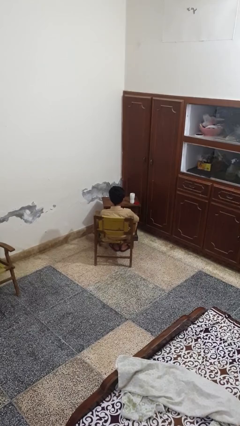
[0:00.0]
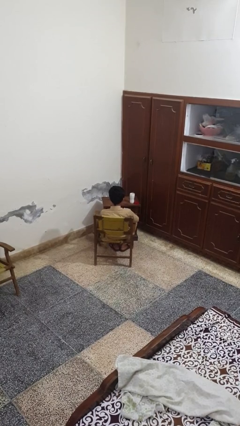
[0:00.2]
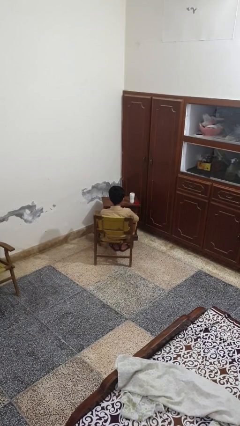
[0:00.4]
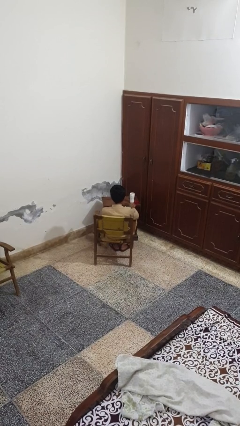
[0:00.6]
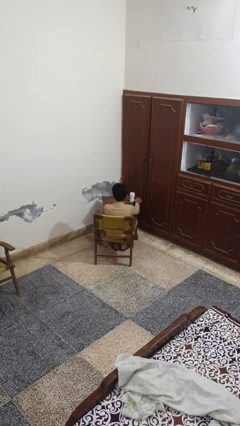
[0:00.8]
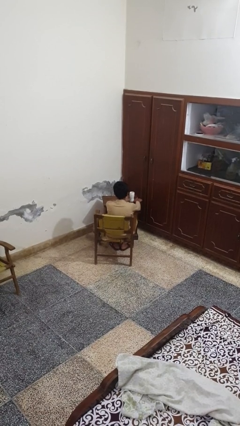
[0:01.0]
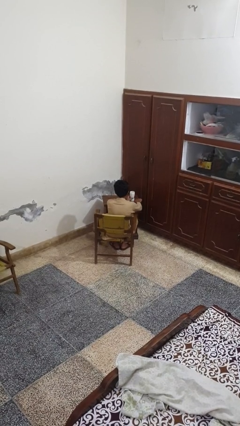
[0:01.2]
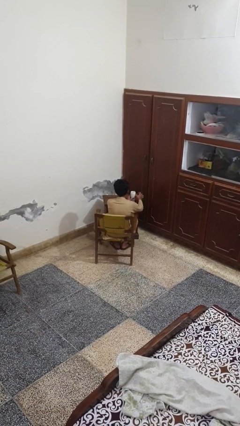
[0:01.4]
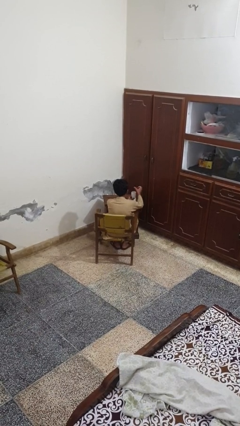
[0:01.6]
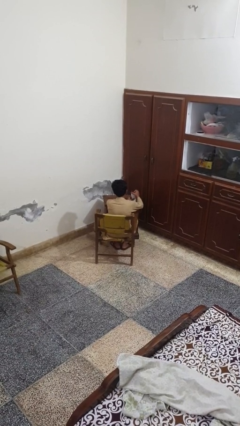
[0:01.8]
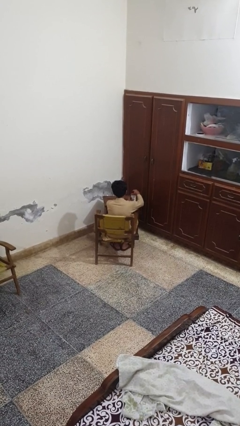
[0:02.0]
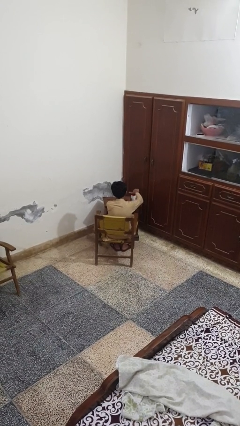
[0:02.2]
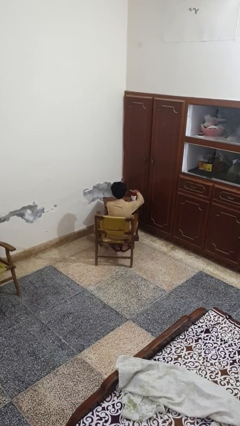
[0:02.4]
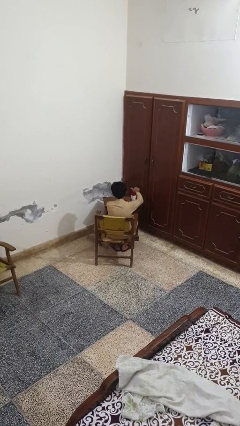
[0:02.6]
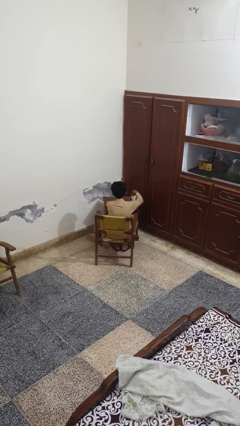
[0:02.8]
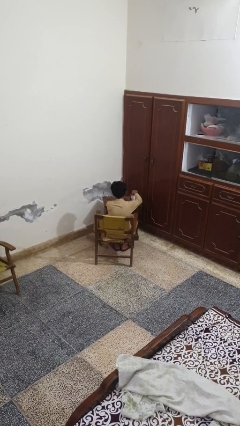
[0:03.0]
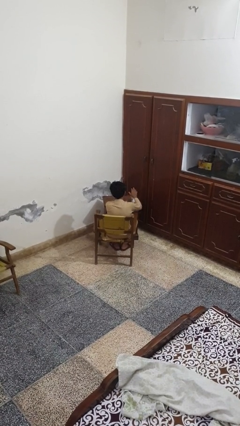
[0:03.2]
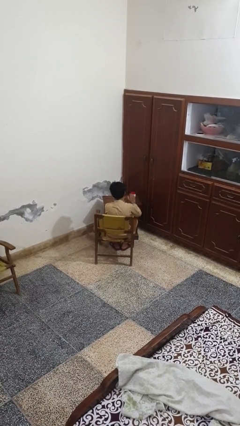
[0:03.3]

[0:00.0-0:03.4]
person closes jar

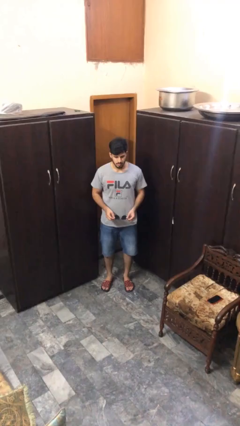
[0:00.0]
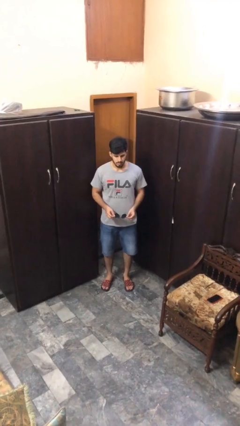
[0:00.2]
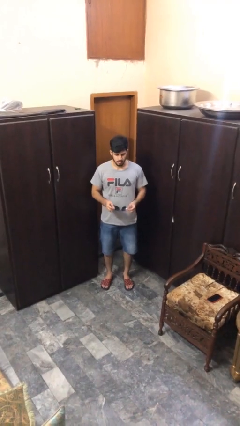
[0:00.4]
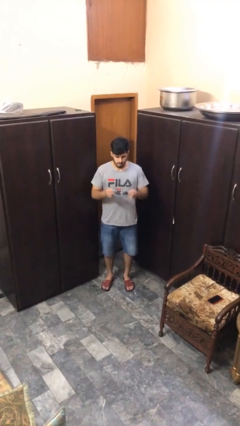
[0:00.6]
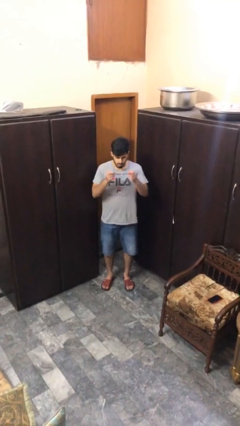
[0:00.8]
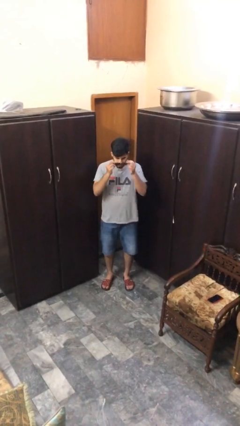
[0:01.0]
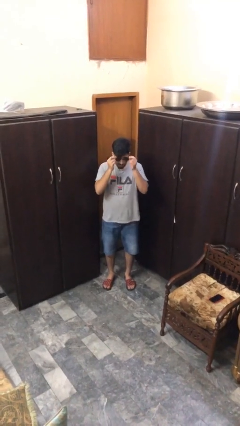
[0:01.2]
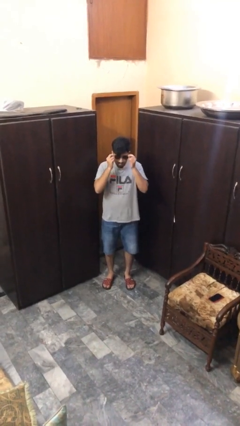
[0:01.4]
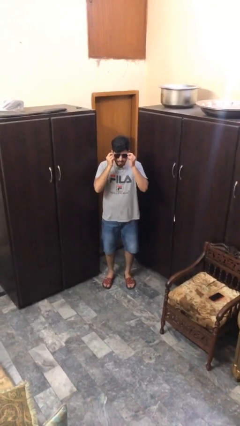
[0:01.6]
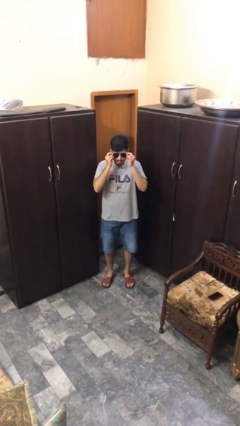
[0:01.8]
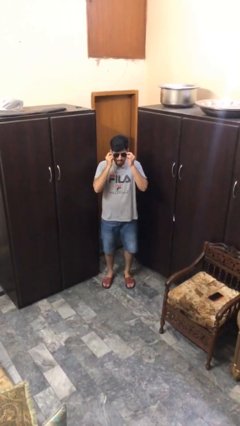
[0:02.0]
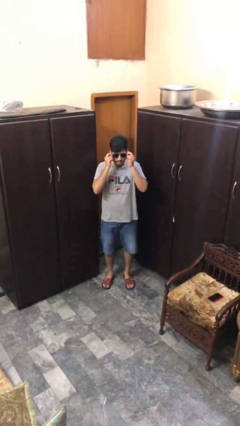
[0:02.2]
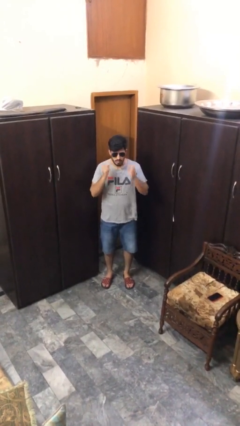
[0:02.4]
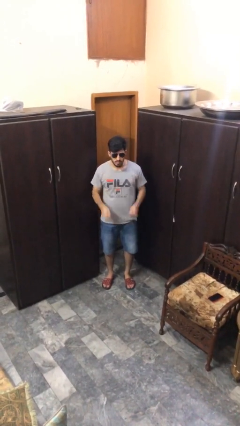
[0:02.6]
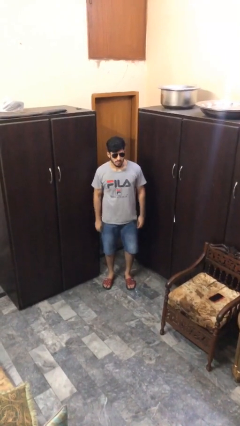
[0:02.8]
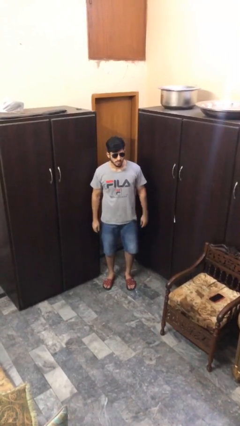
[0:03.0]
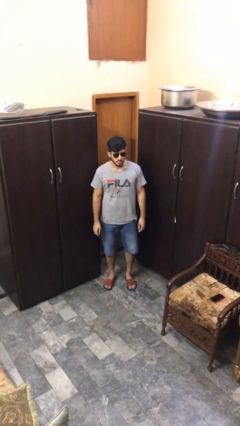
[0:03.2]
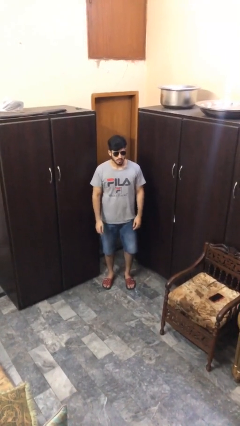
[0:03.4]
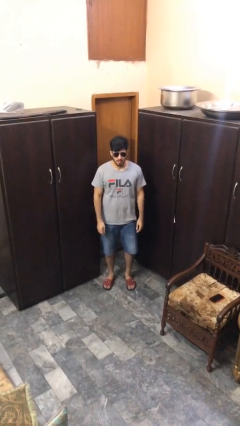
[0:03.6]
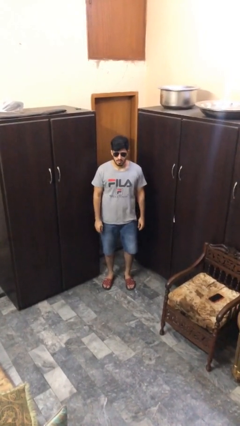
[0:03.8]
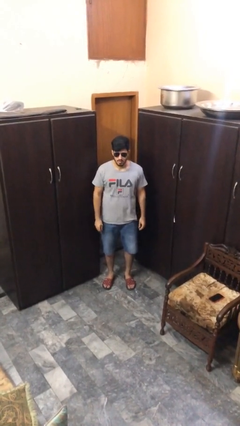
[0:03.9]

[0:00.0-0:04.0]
person puts on sunglasses

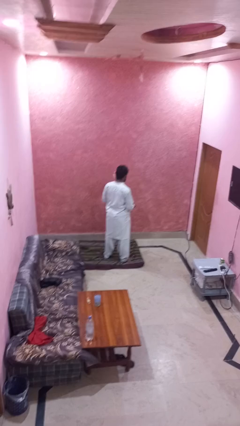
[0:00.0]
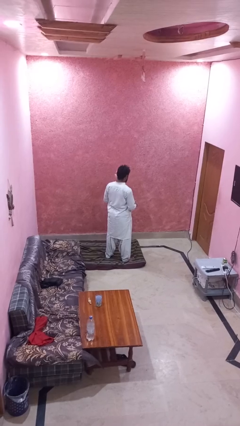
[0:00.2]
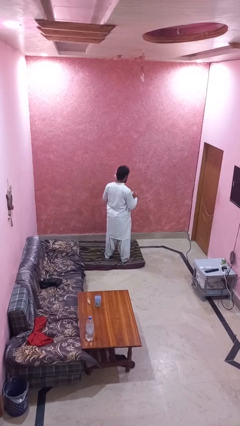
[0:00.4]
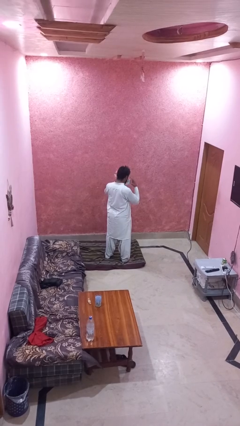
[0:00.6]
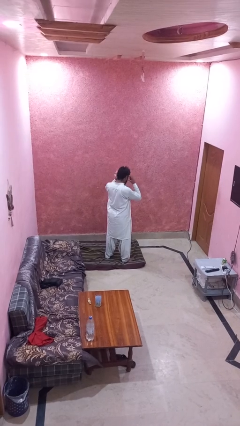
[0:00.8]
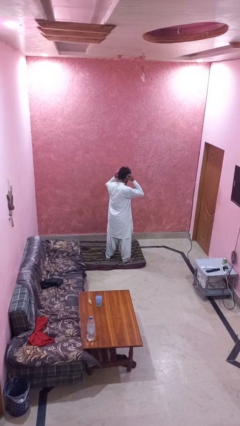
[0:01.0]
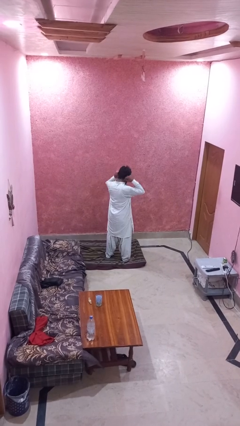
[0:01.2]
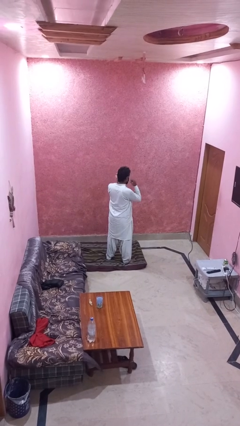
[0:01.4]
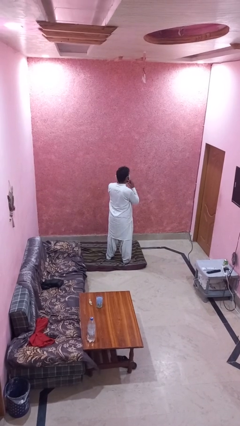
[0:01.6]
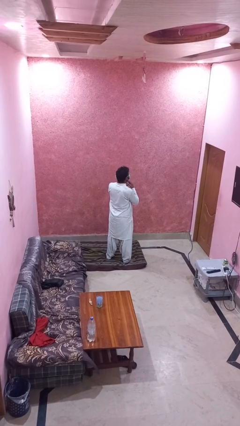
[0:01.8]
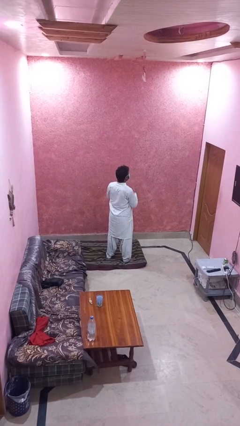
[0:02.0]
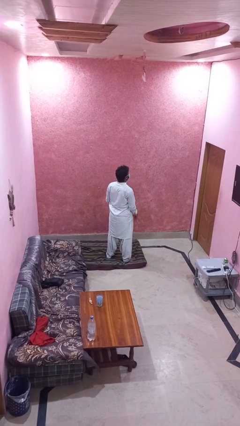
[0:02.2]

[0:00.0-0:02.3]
person puts on facemask

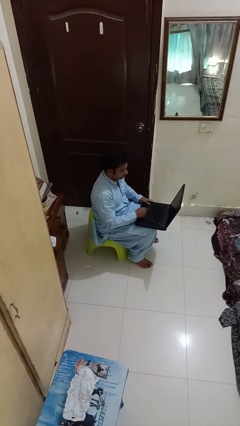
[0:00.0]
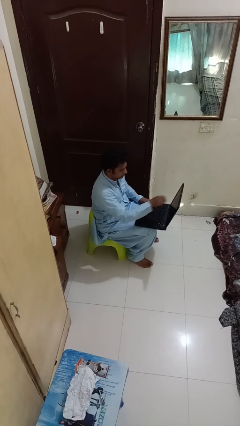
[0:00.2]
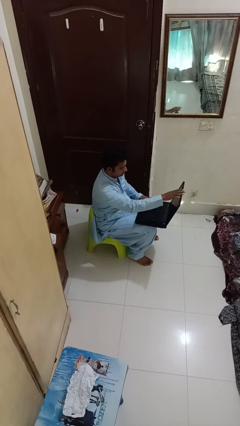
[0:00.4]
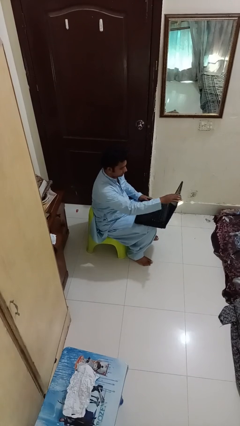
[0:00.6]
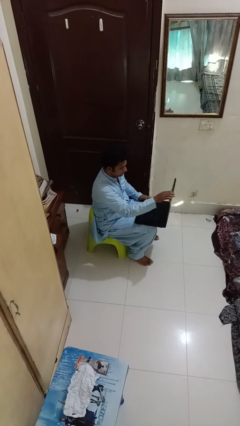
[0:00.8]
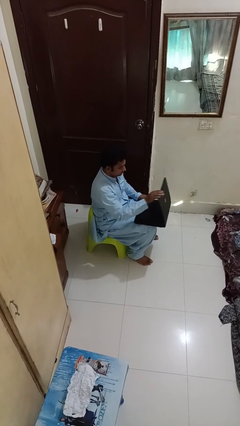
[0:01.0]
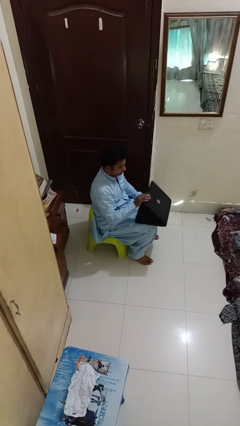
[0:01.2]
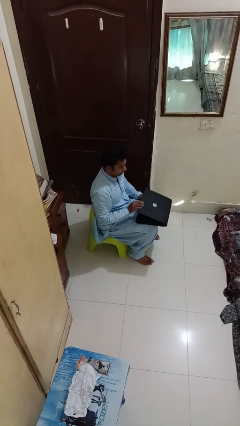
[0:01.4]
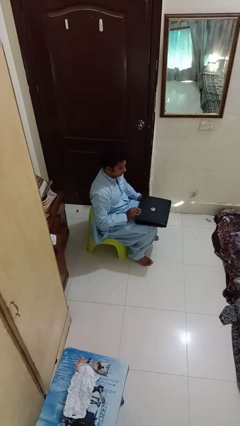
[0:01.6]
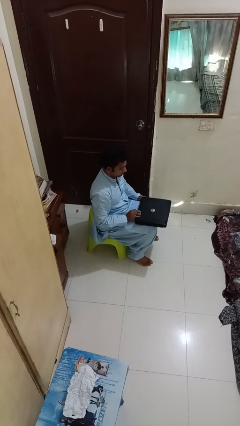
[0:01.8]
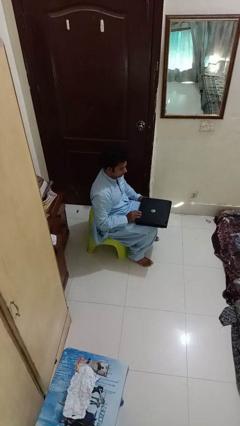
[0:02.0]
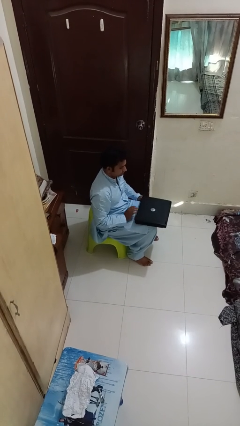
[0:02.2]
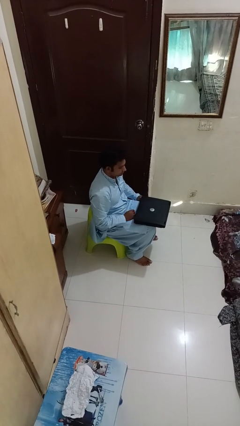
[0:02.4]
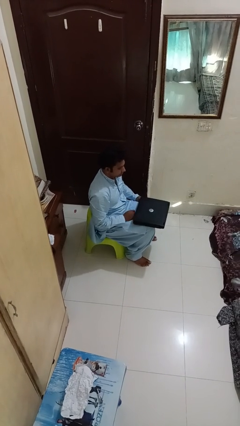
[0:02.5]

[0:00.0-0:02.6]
person closes laptop

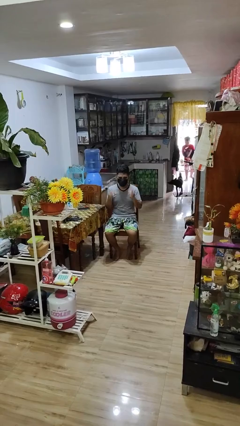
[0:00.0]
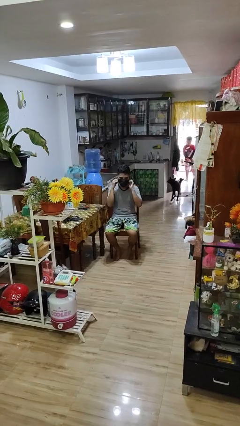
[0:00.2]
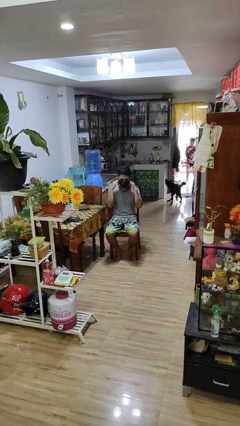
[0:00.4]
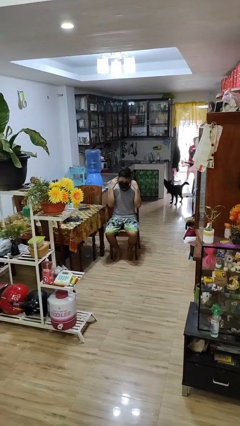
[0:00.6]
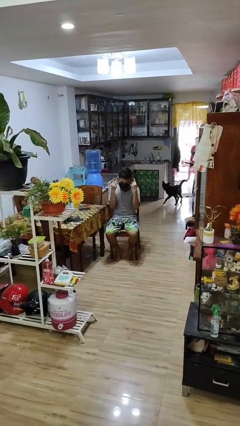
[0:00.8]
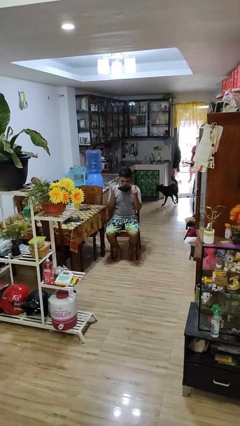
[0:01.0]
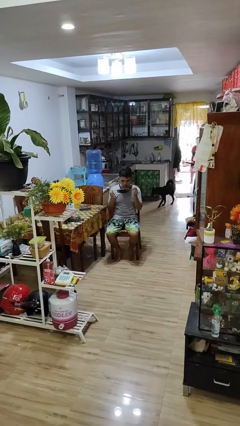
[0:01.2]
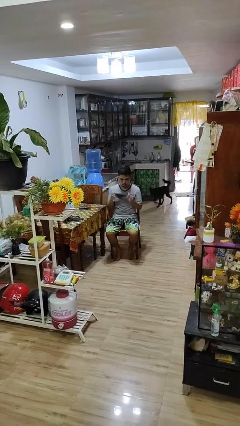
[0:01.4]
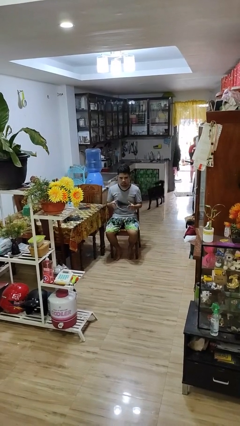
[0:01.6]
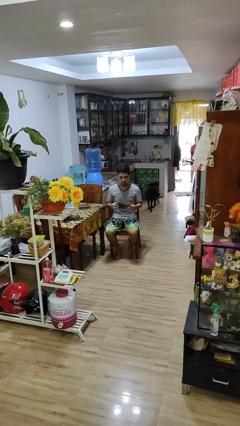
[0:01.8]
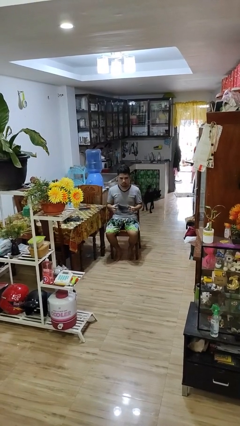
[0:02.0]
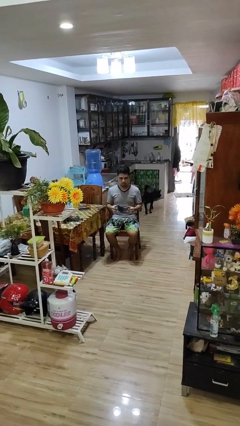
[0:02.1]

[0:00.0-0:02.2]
person takes off facemask

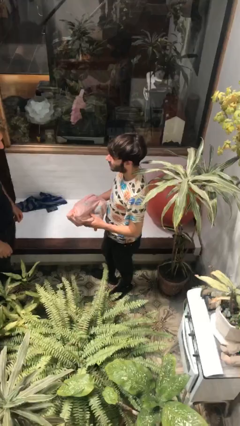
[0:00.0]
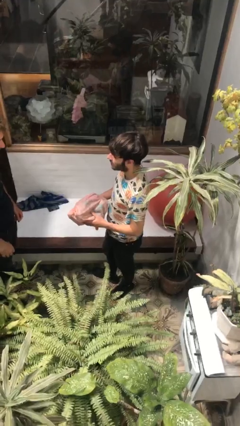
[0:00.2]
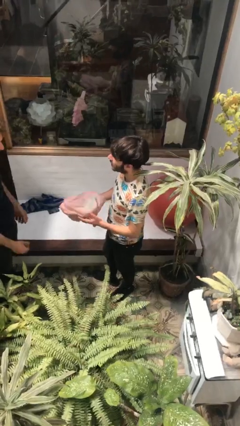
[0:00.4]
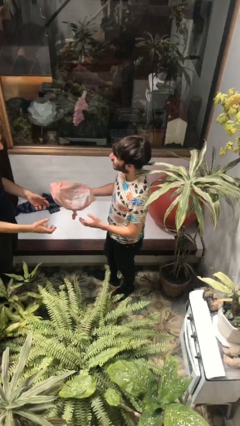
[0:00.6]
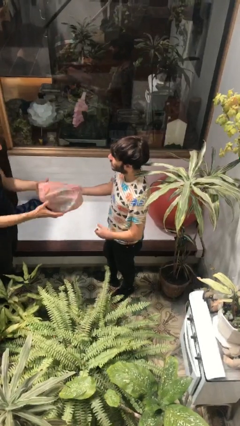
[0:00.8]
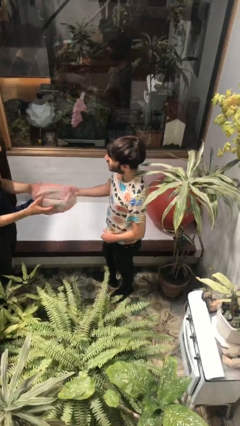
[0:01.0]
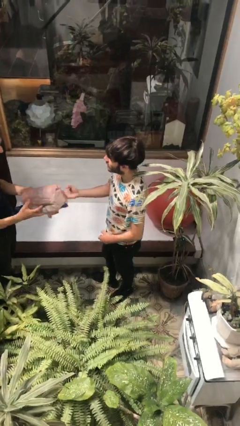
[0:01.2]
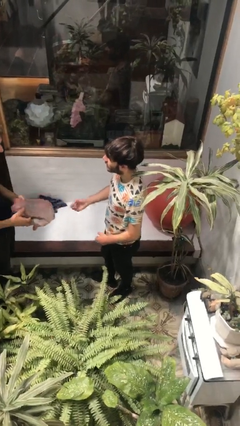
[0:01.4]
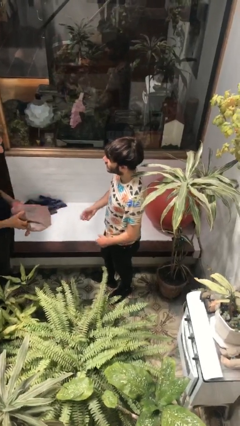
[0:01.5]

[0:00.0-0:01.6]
person transfers object to person

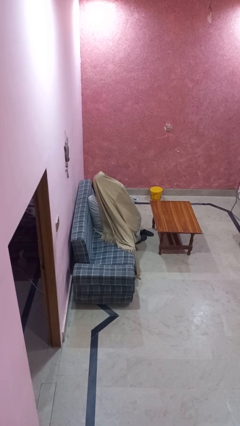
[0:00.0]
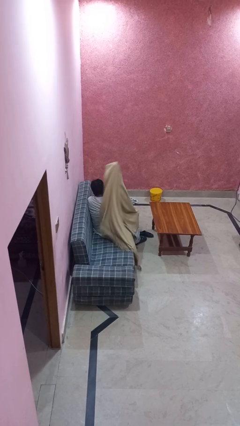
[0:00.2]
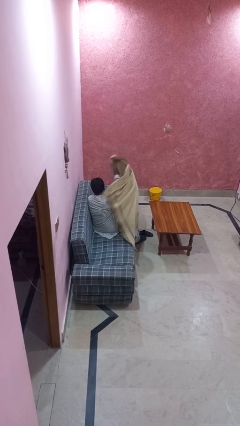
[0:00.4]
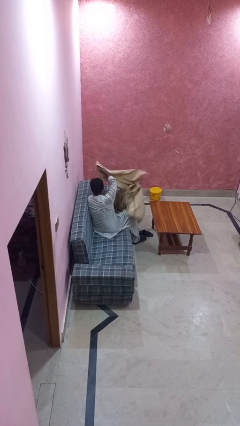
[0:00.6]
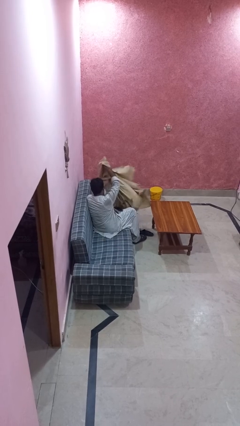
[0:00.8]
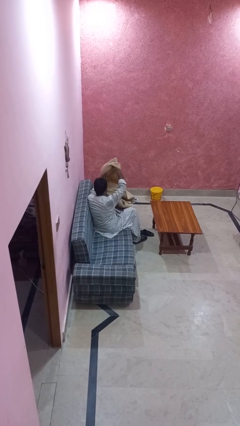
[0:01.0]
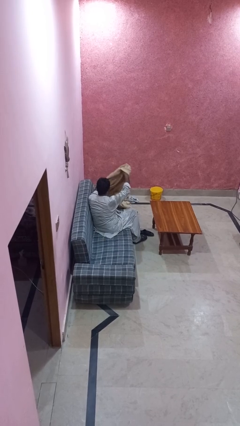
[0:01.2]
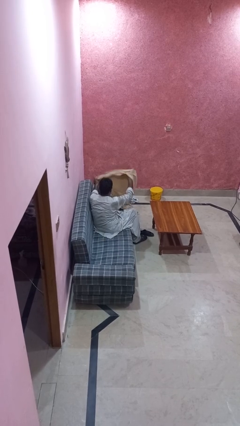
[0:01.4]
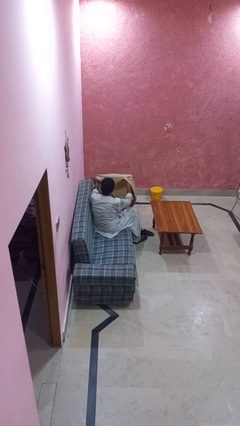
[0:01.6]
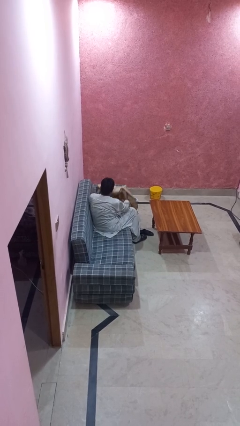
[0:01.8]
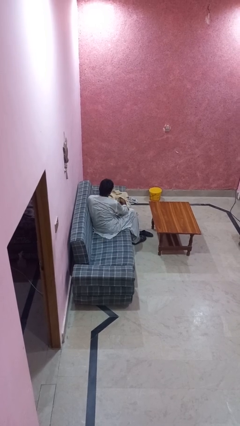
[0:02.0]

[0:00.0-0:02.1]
person uncovers with blanket
